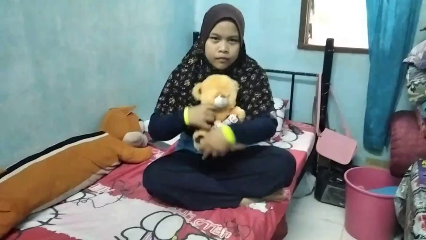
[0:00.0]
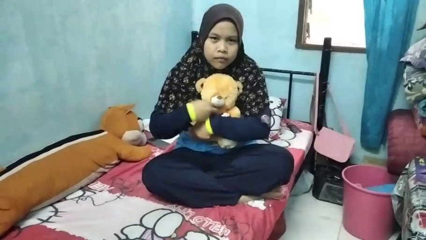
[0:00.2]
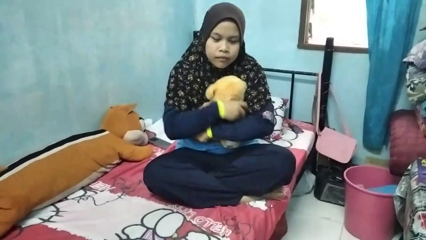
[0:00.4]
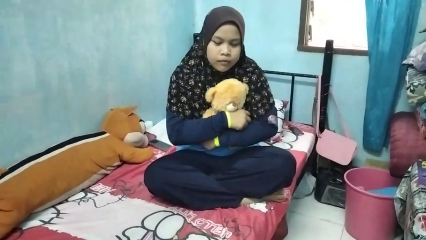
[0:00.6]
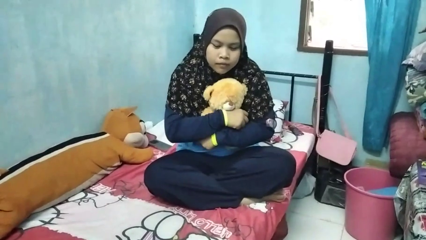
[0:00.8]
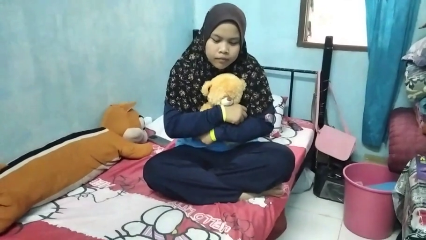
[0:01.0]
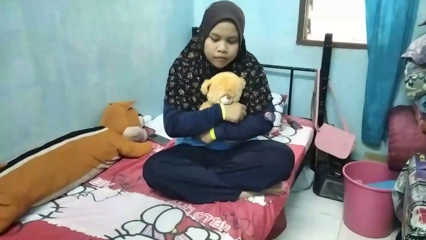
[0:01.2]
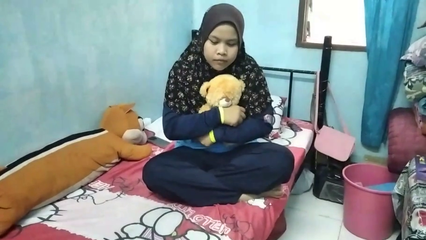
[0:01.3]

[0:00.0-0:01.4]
person hugs stuffed animal

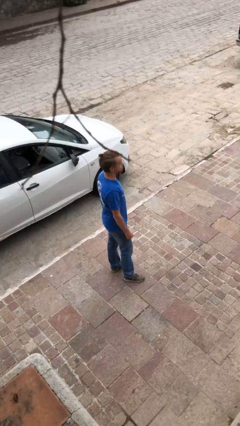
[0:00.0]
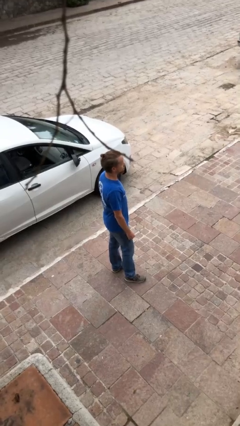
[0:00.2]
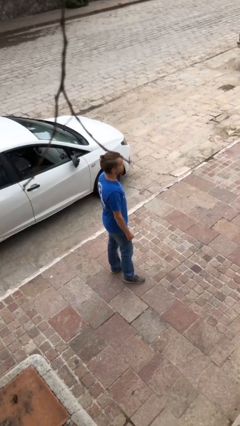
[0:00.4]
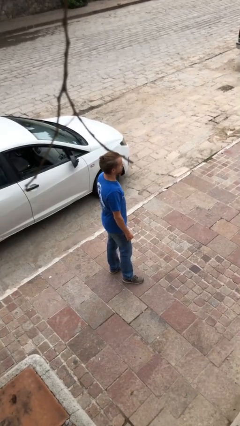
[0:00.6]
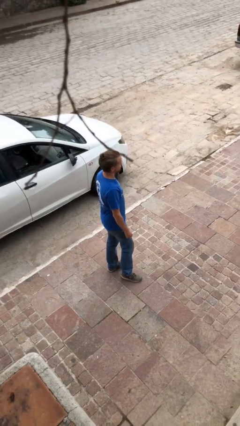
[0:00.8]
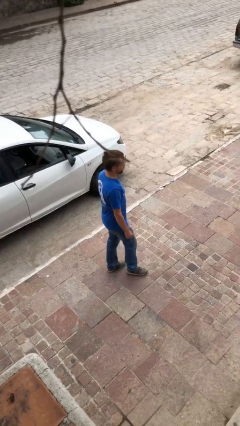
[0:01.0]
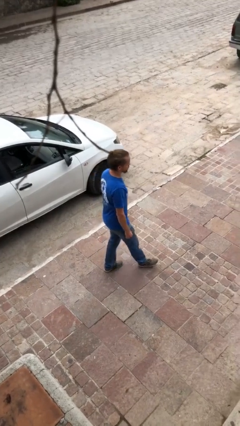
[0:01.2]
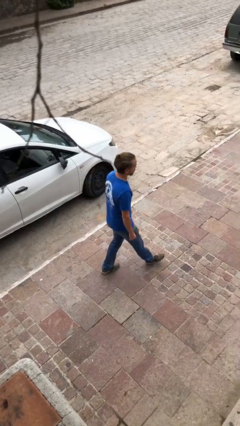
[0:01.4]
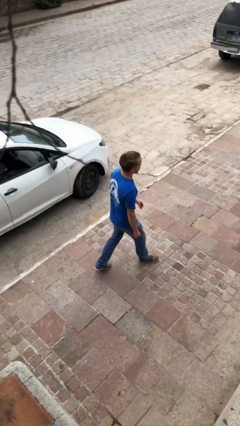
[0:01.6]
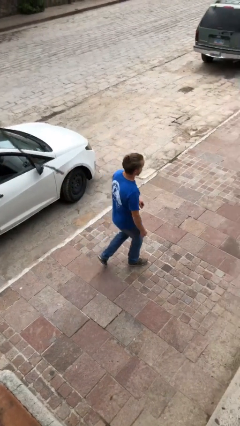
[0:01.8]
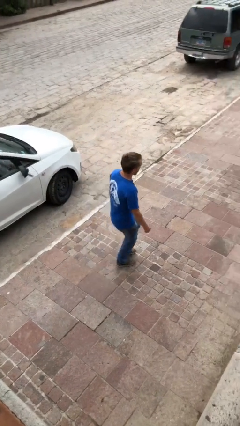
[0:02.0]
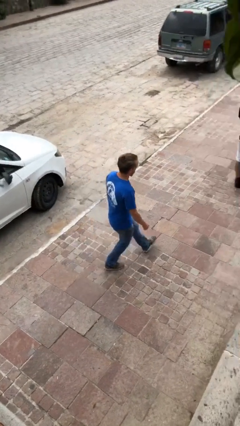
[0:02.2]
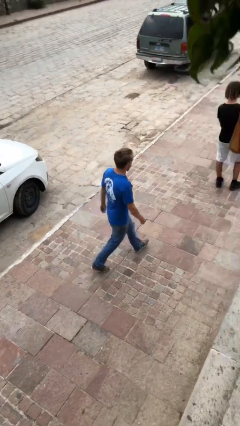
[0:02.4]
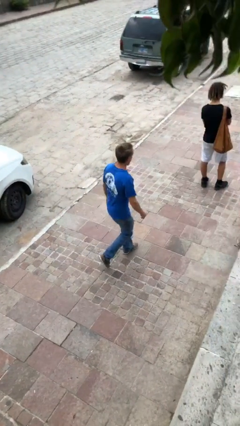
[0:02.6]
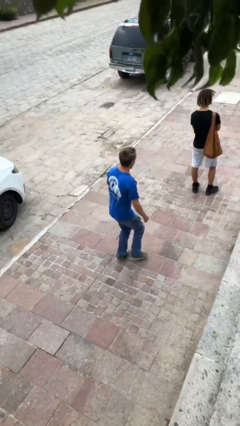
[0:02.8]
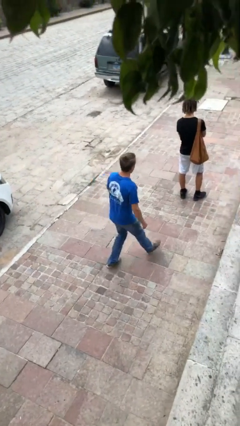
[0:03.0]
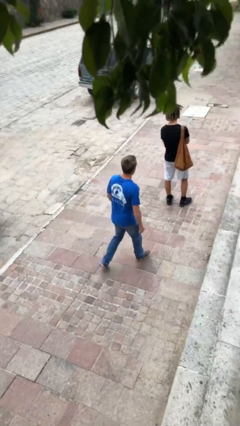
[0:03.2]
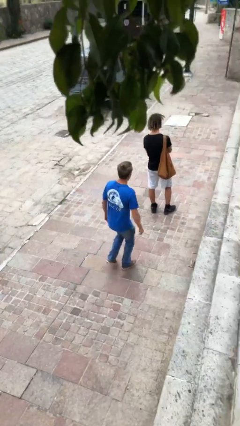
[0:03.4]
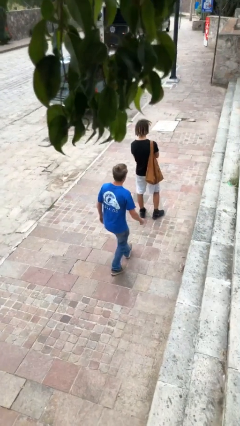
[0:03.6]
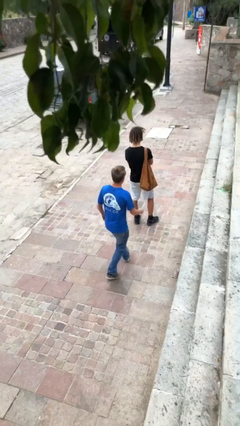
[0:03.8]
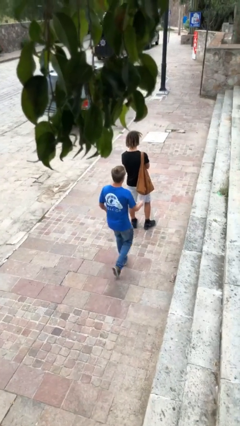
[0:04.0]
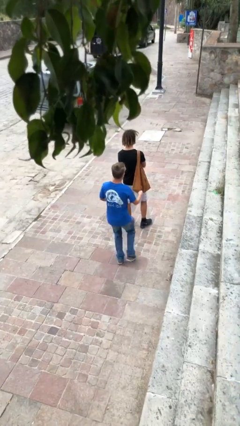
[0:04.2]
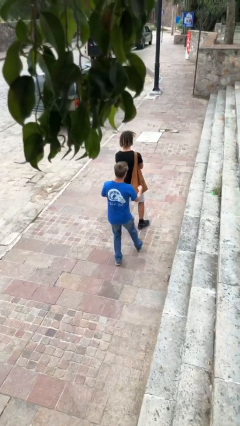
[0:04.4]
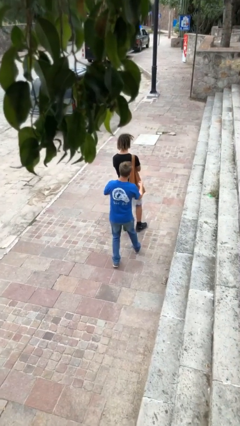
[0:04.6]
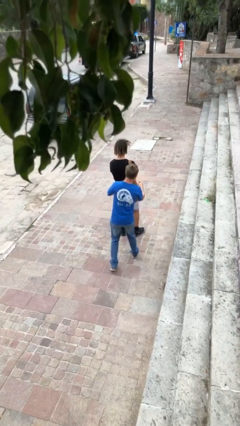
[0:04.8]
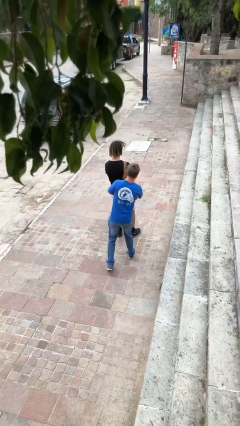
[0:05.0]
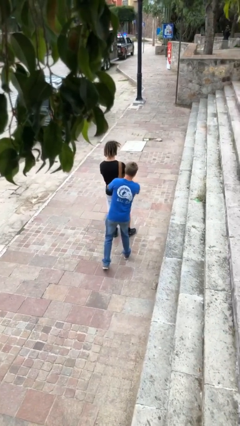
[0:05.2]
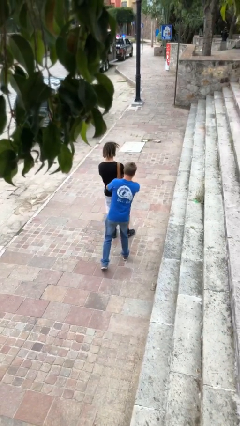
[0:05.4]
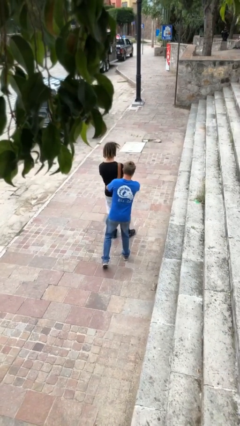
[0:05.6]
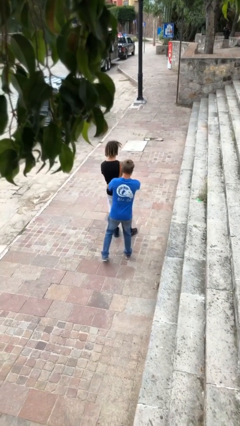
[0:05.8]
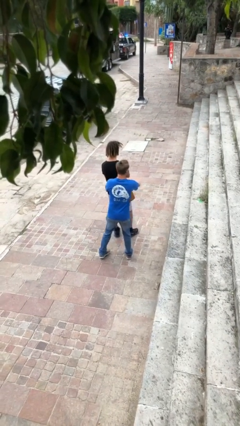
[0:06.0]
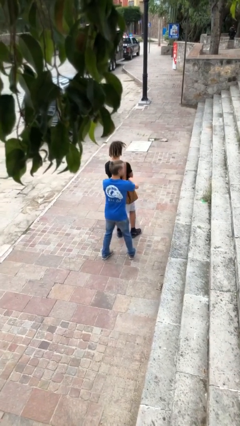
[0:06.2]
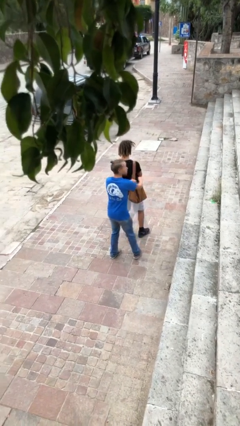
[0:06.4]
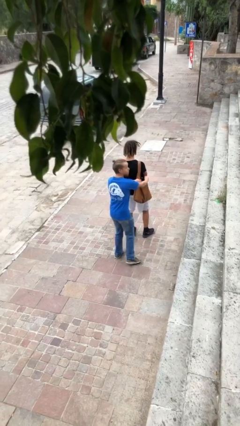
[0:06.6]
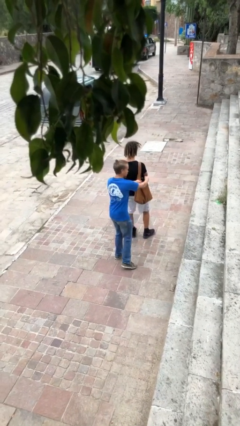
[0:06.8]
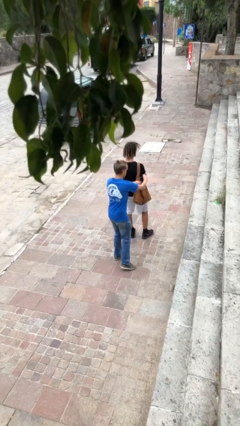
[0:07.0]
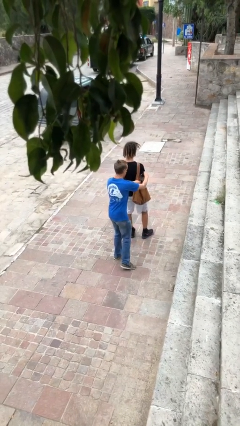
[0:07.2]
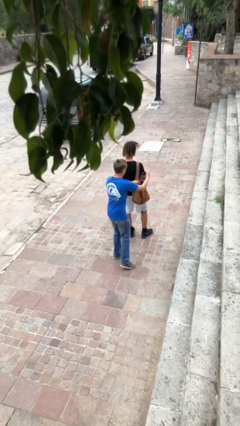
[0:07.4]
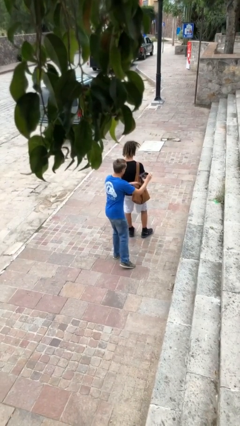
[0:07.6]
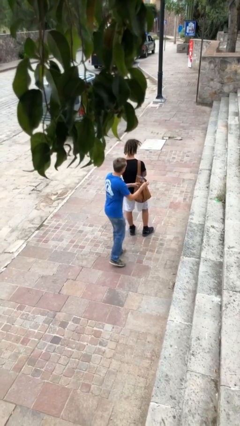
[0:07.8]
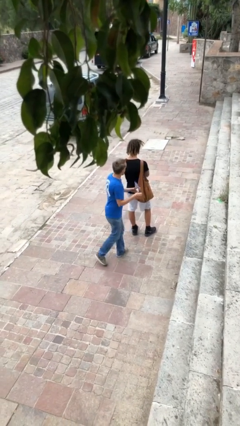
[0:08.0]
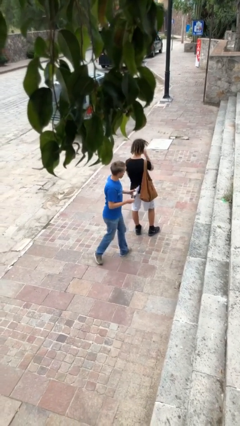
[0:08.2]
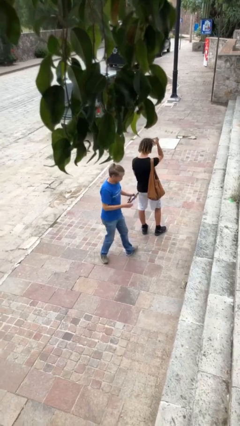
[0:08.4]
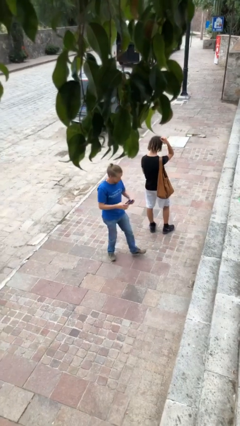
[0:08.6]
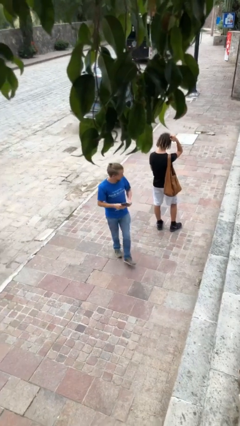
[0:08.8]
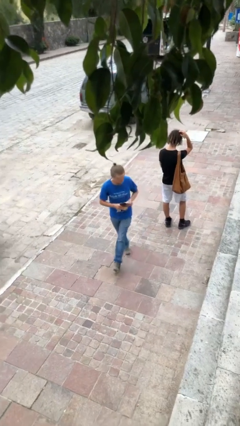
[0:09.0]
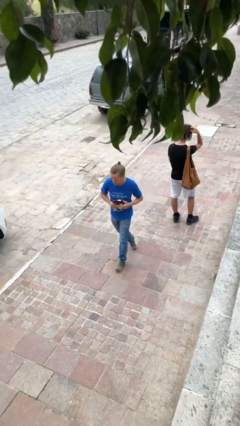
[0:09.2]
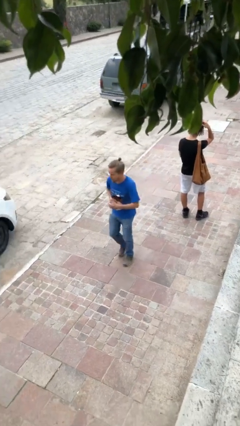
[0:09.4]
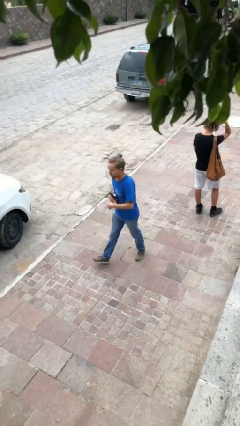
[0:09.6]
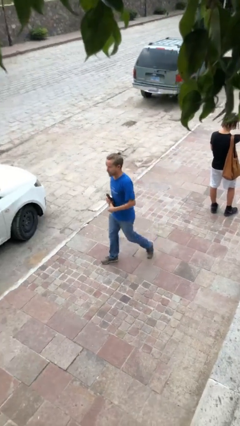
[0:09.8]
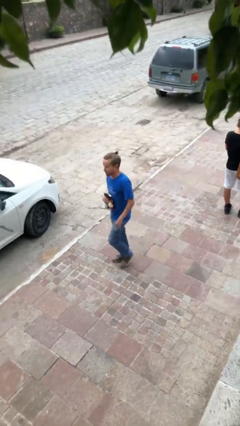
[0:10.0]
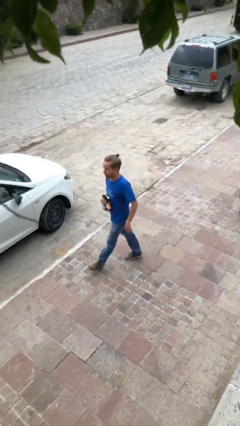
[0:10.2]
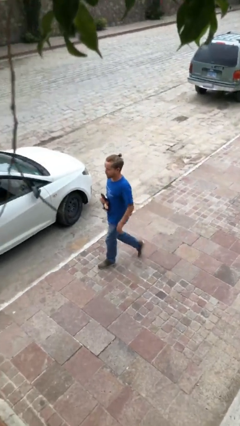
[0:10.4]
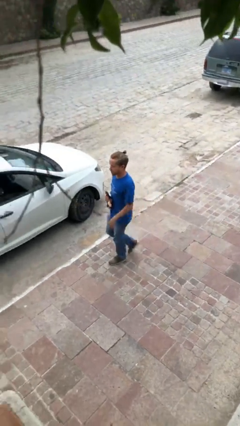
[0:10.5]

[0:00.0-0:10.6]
person steals object from person

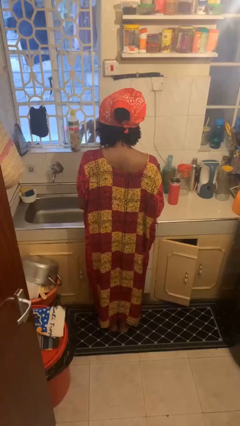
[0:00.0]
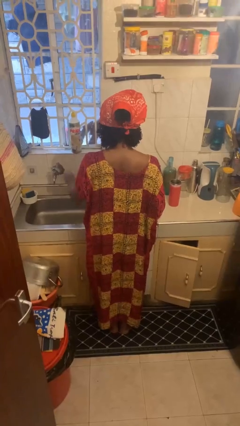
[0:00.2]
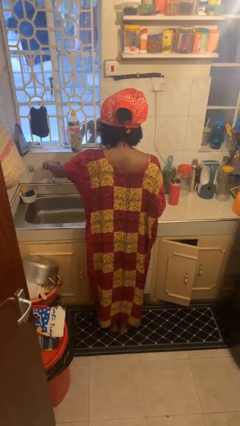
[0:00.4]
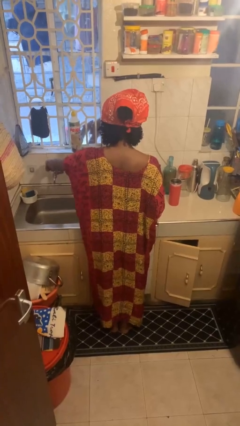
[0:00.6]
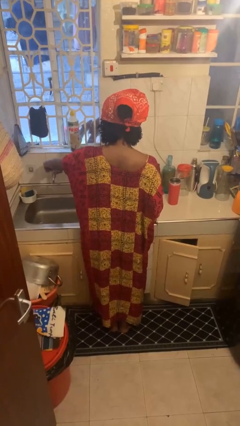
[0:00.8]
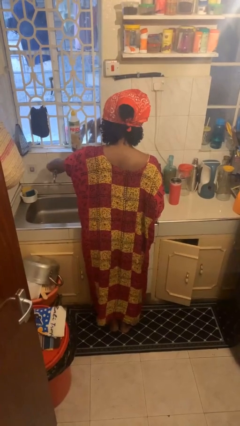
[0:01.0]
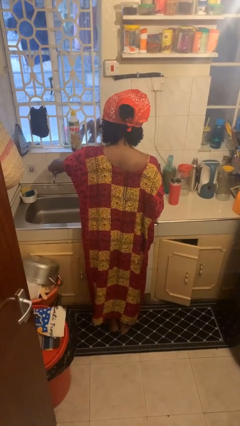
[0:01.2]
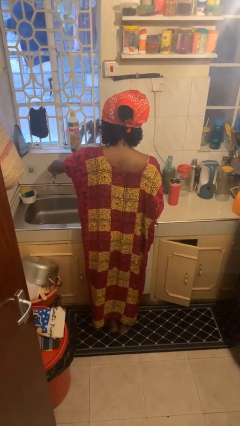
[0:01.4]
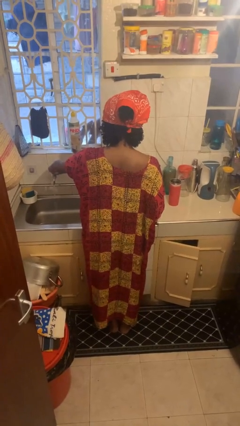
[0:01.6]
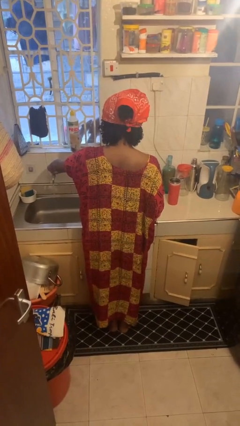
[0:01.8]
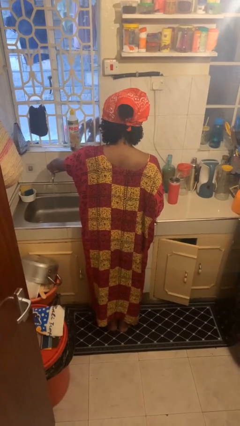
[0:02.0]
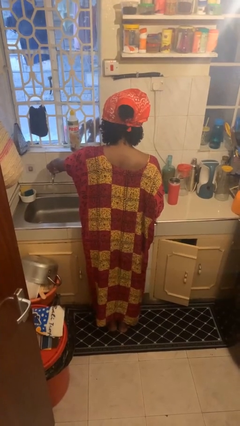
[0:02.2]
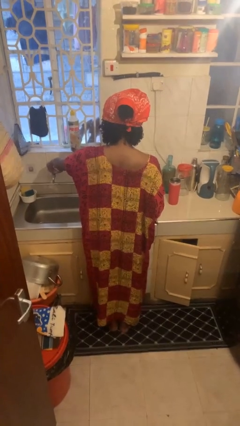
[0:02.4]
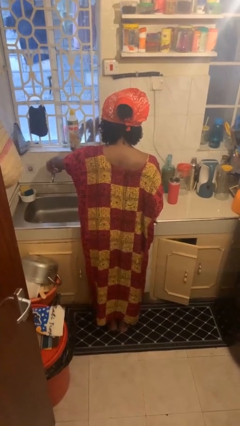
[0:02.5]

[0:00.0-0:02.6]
person turns on faucet

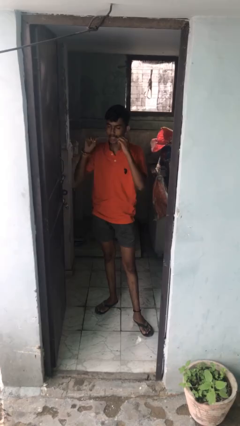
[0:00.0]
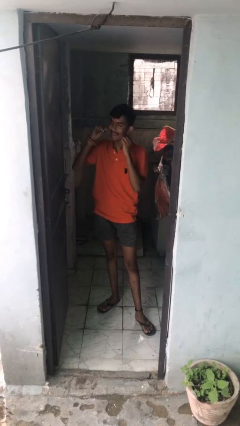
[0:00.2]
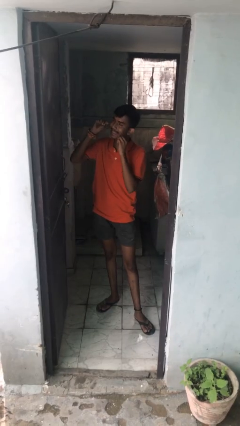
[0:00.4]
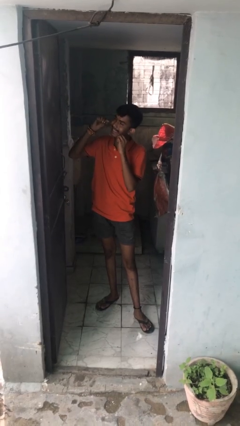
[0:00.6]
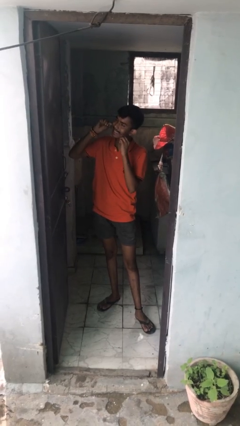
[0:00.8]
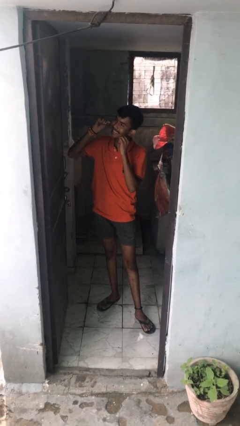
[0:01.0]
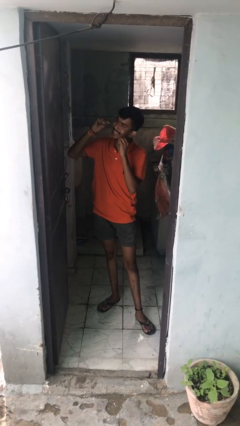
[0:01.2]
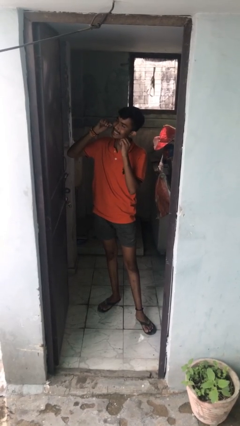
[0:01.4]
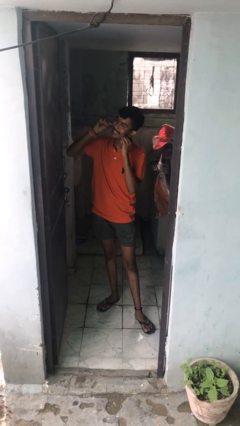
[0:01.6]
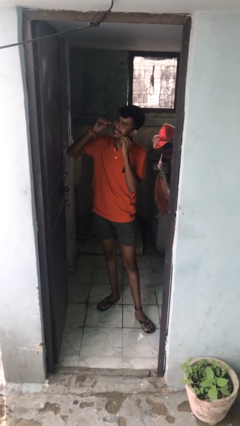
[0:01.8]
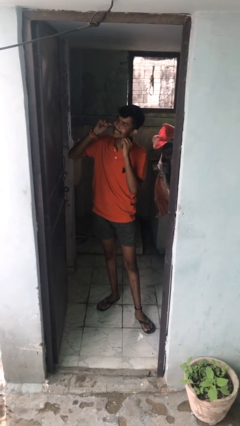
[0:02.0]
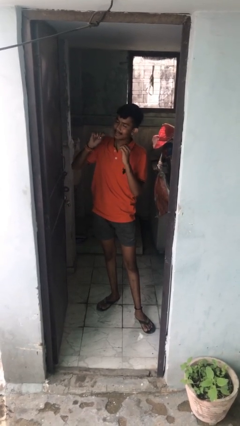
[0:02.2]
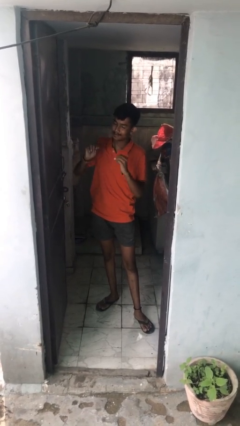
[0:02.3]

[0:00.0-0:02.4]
person flosses

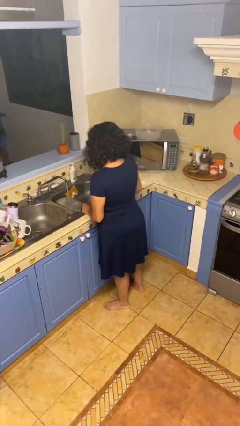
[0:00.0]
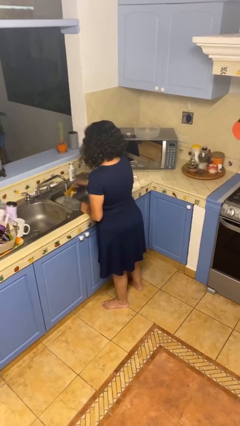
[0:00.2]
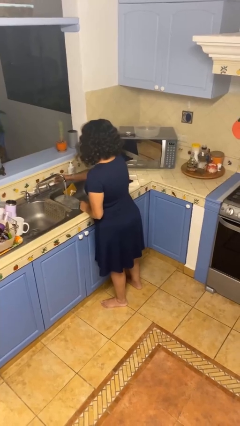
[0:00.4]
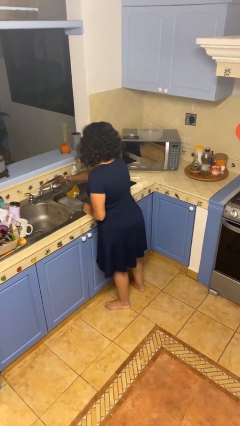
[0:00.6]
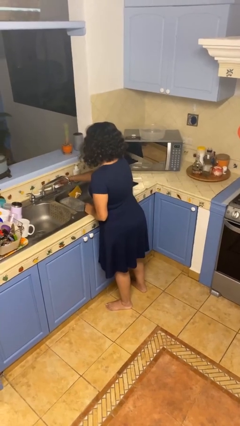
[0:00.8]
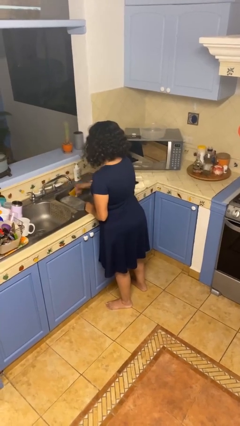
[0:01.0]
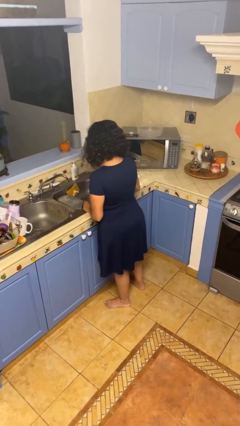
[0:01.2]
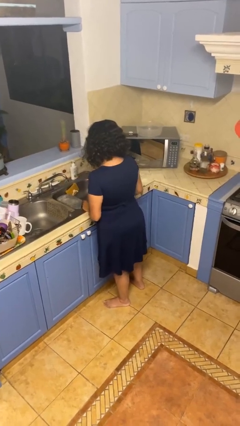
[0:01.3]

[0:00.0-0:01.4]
person turns off faucet
